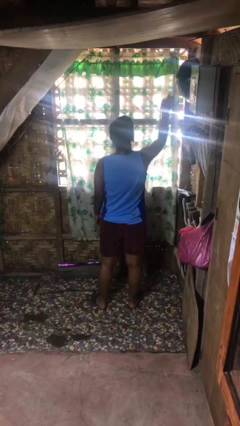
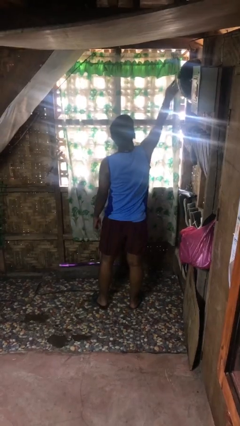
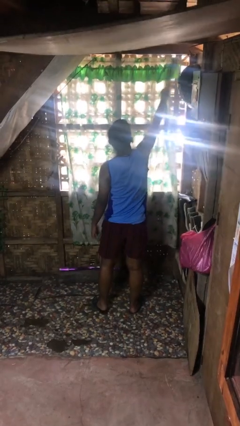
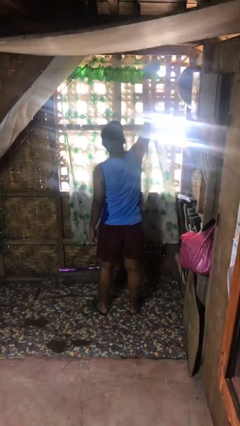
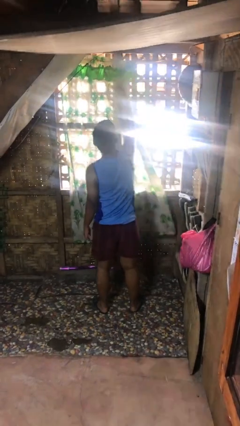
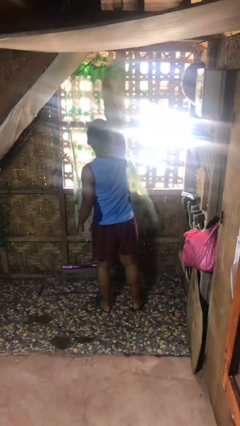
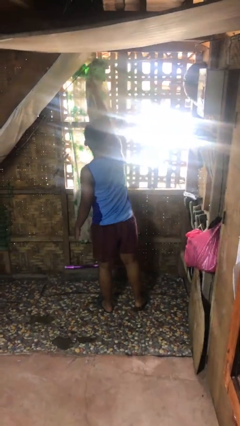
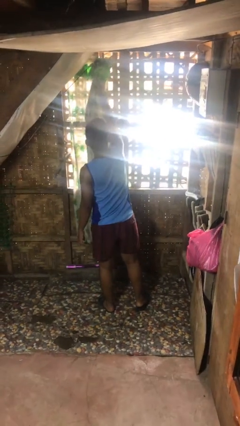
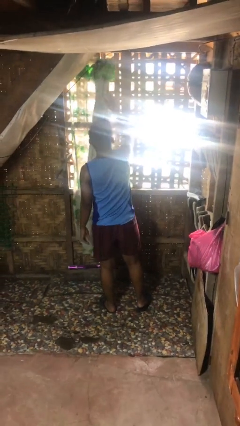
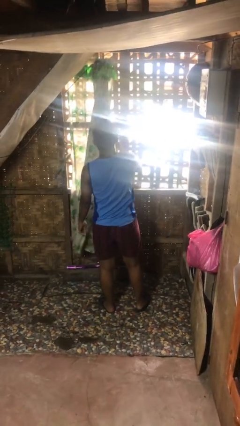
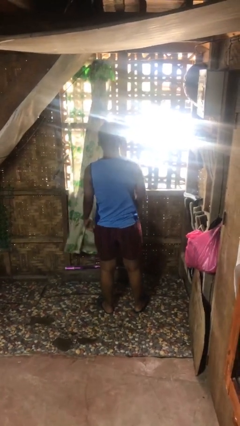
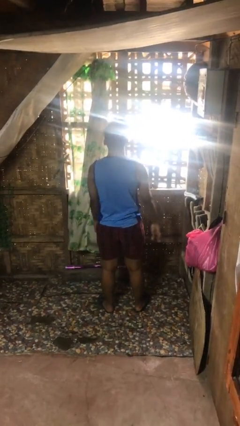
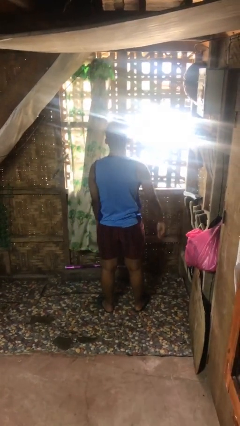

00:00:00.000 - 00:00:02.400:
person opens curtains

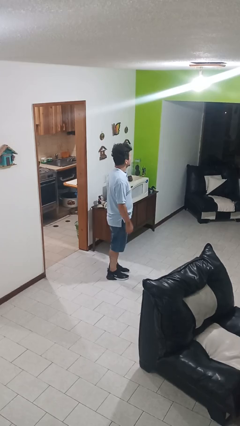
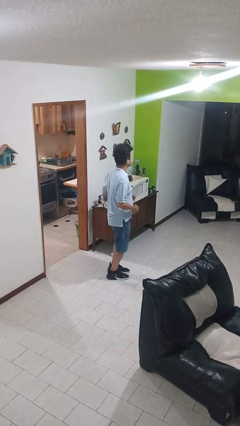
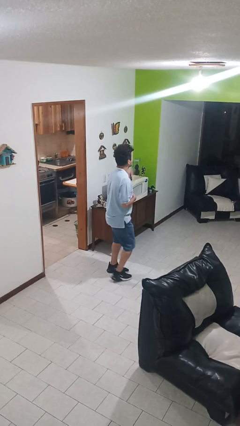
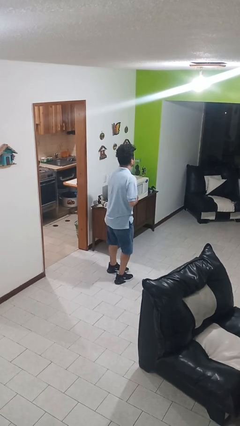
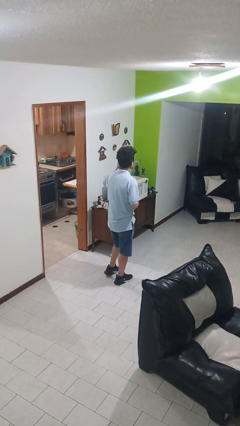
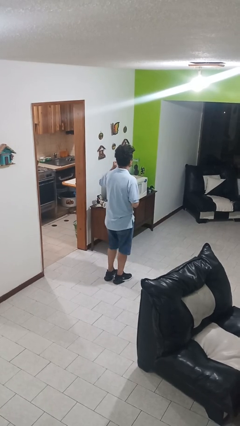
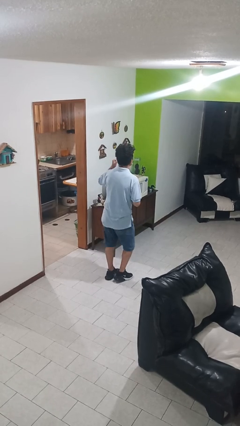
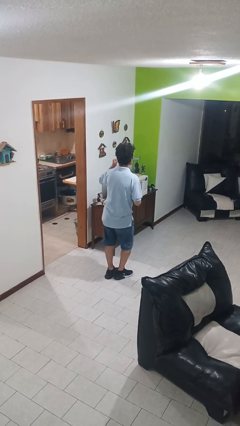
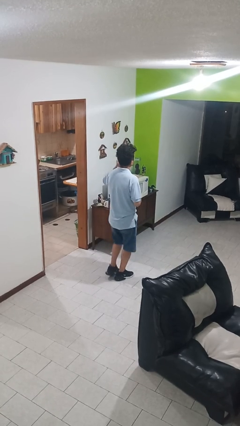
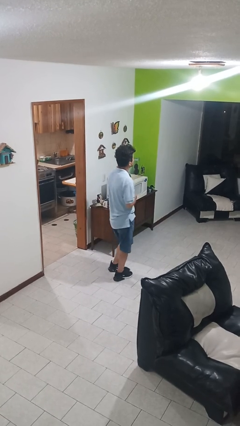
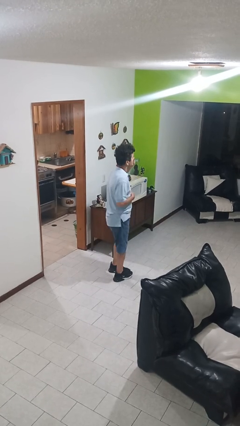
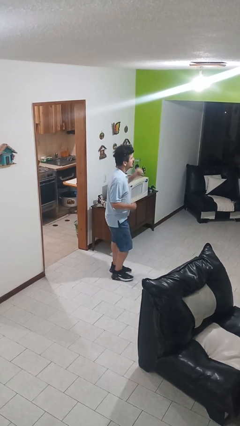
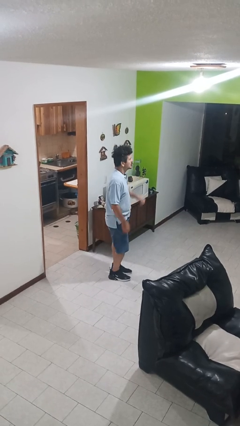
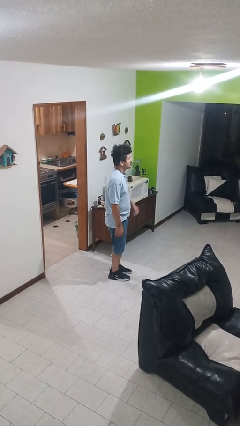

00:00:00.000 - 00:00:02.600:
person dances in place

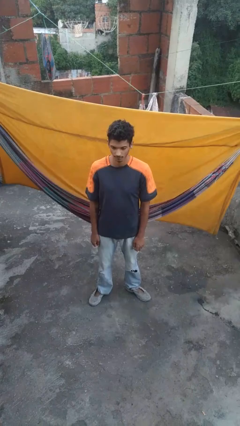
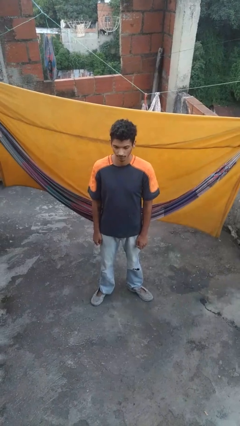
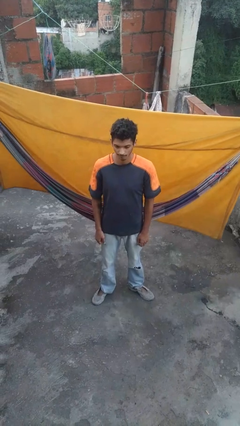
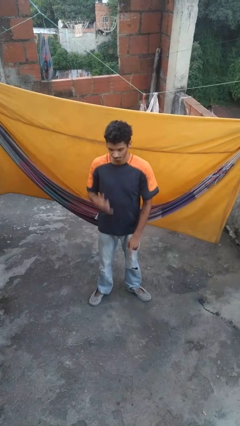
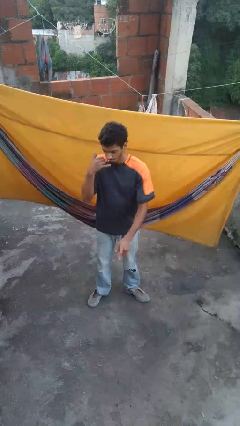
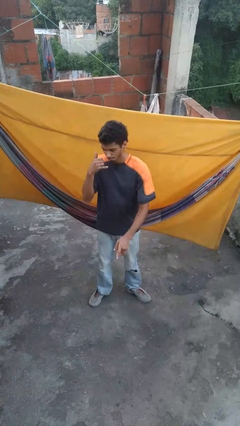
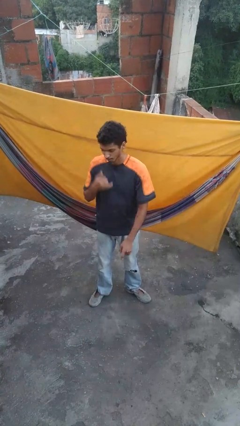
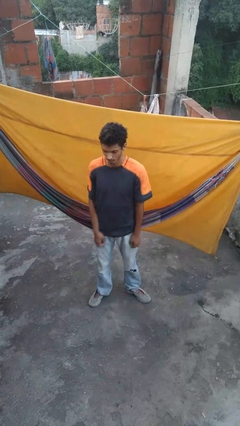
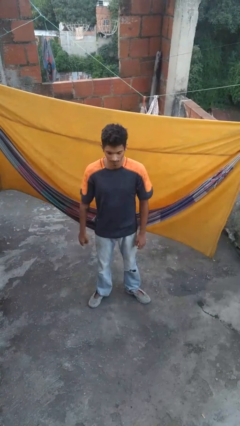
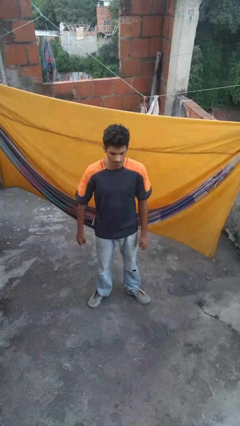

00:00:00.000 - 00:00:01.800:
person gestures call me

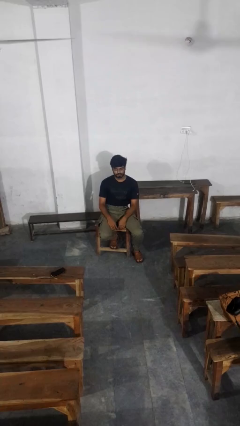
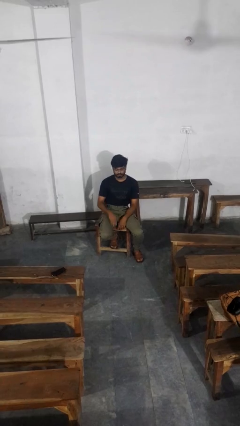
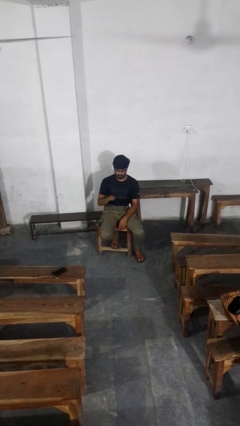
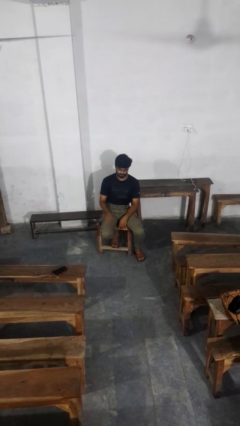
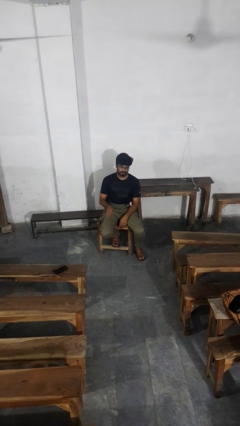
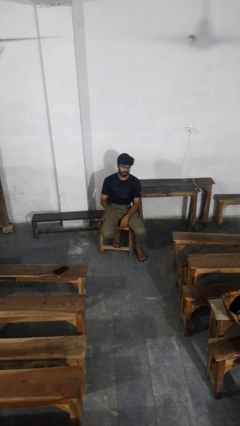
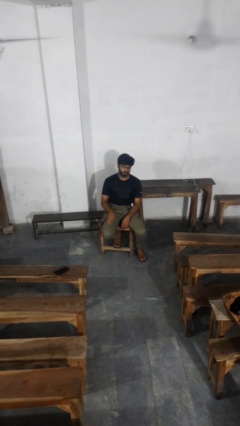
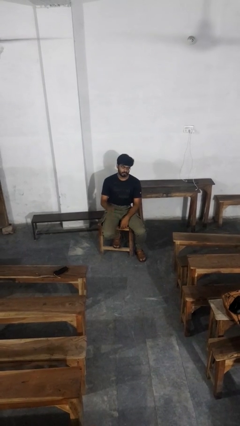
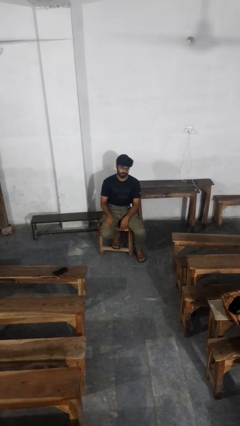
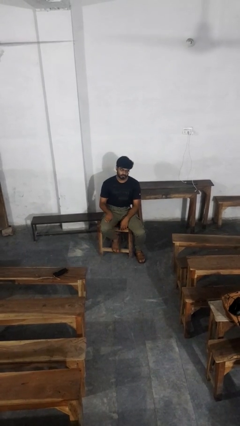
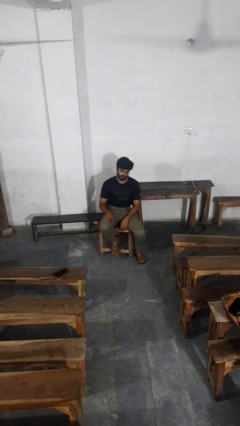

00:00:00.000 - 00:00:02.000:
person slaps hands on thighs

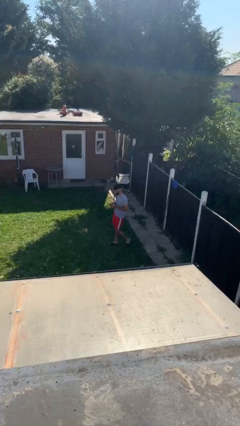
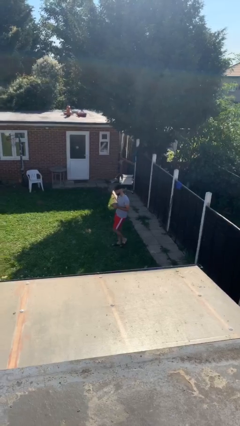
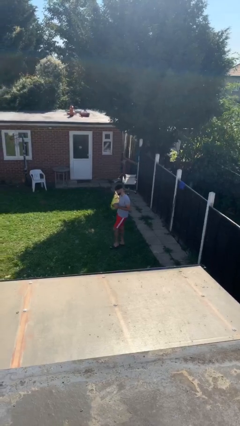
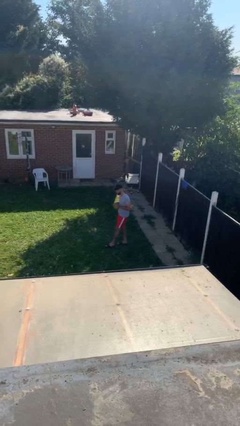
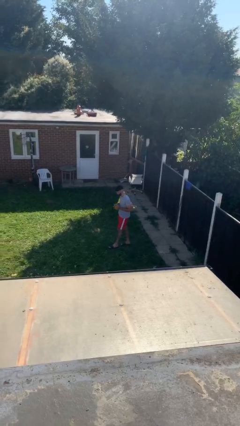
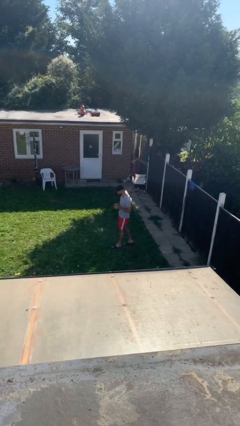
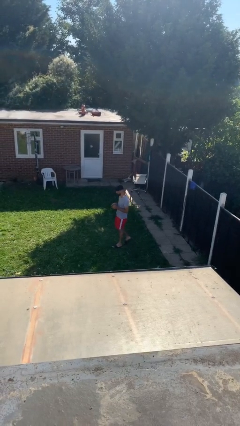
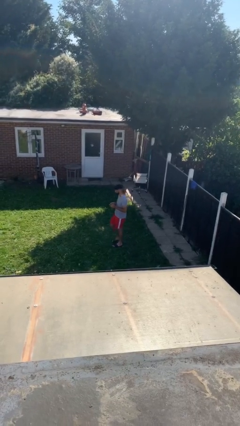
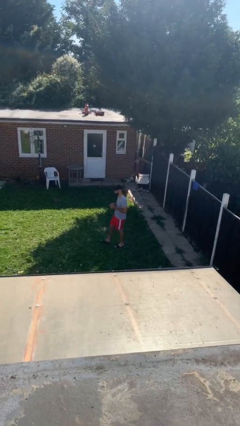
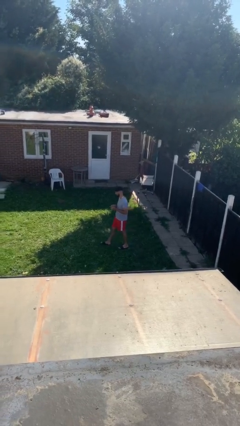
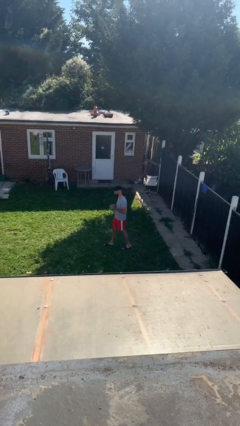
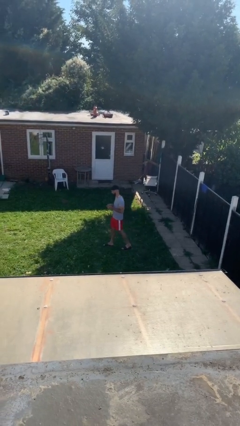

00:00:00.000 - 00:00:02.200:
person texts on phone

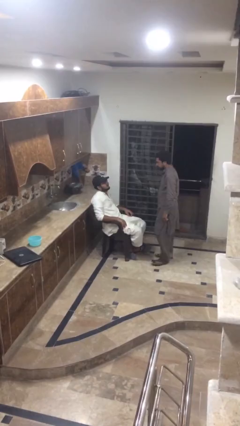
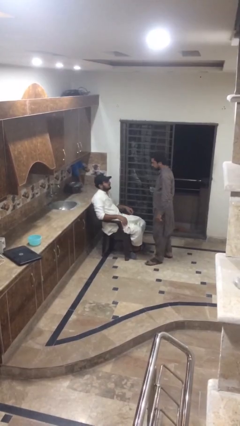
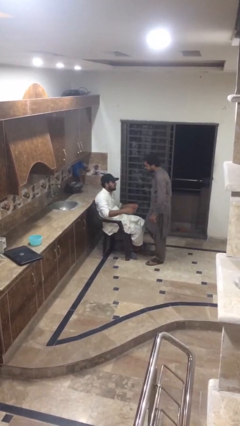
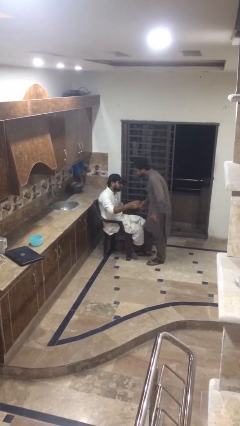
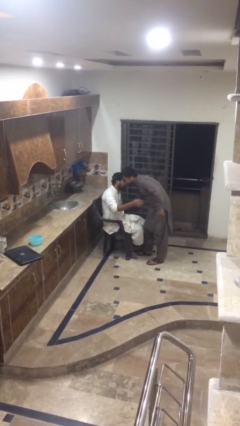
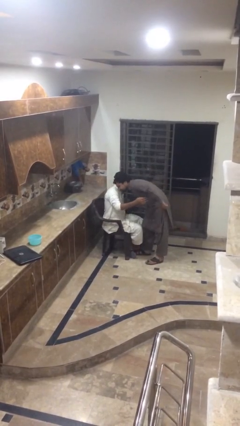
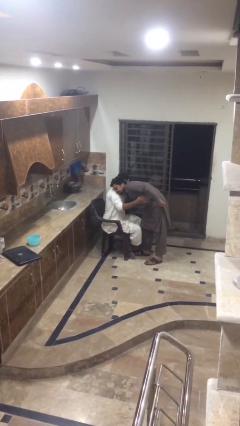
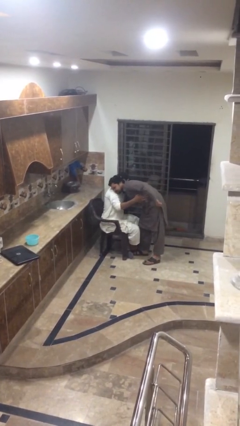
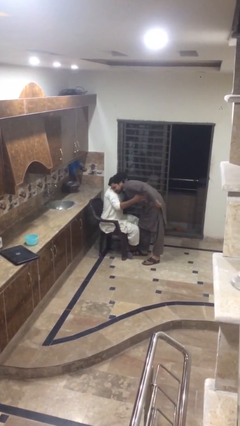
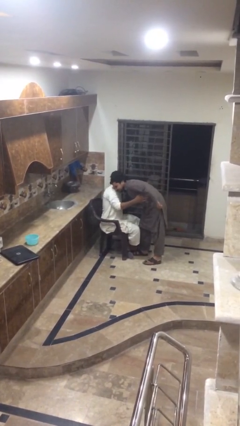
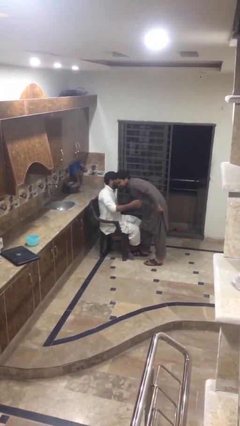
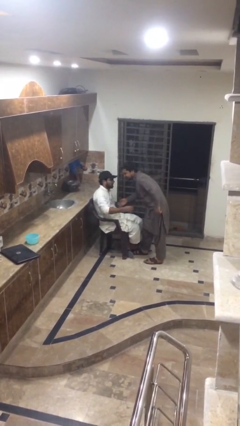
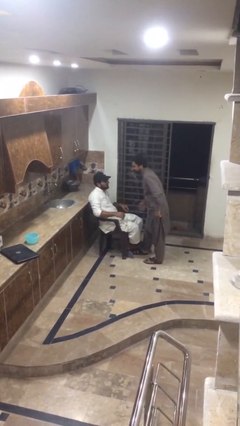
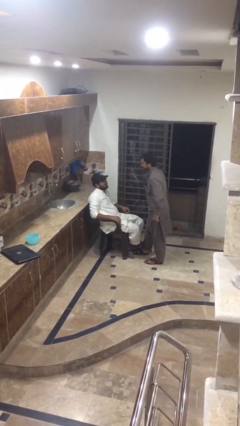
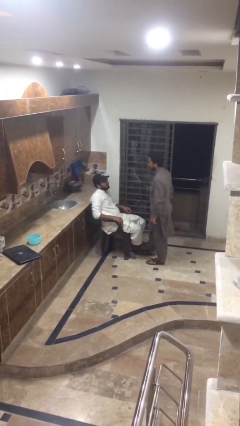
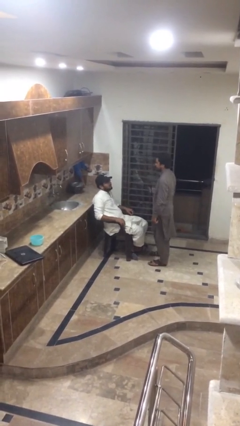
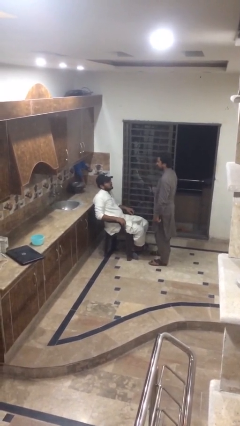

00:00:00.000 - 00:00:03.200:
person embraces person

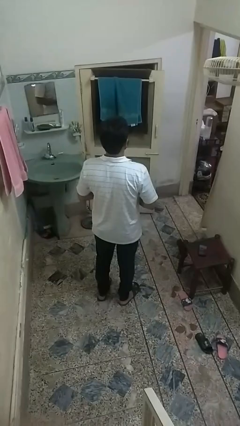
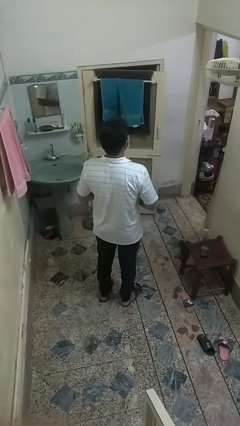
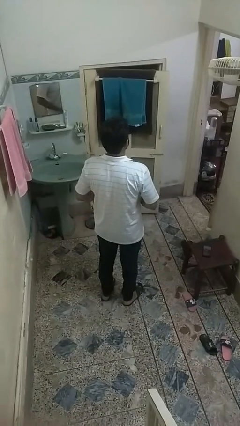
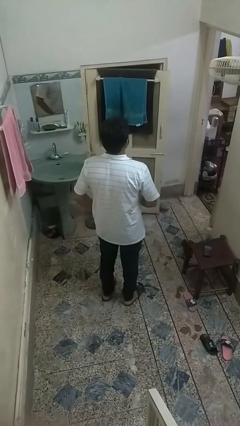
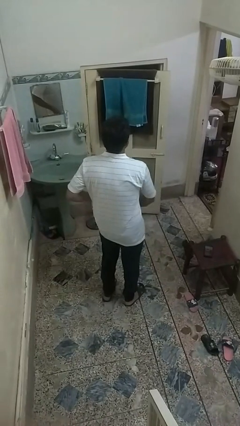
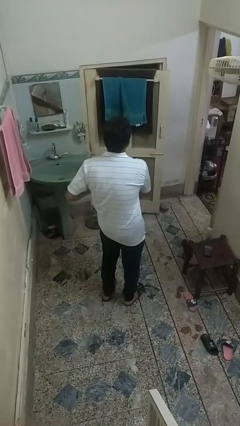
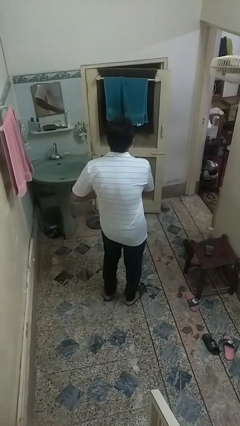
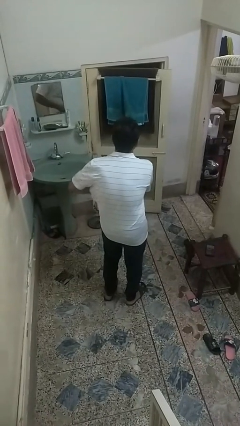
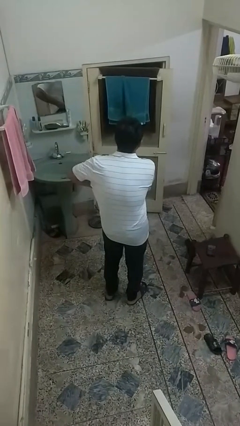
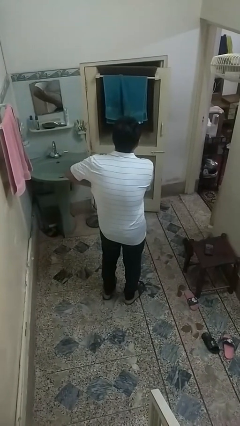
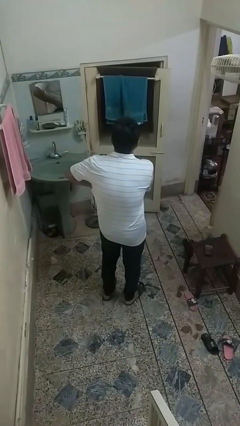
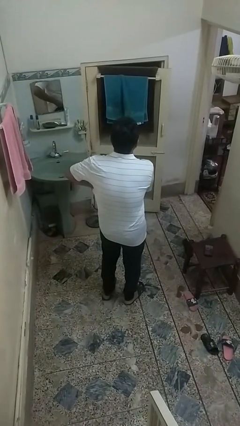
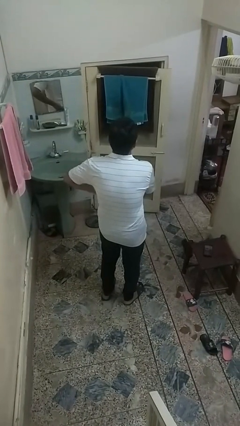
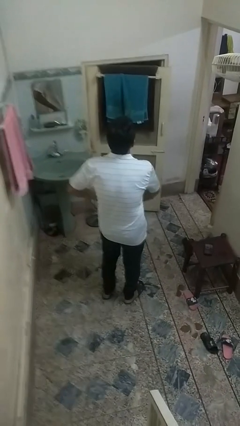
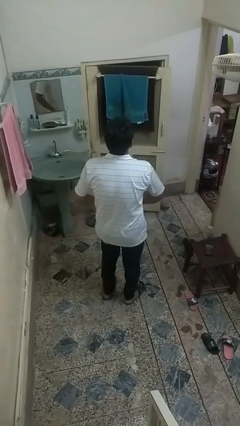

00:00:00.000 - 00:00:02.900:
person applies deodorant
